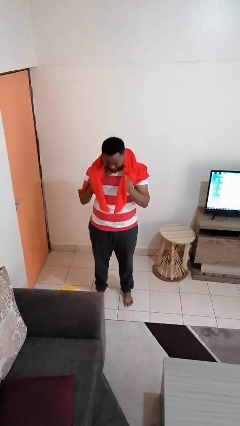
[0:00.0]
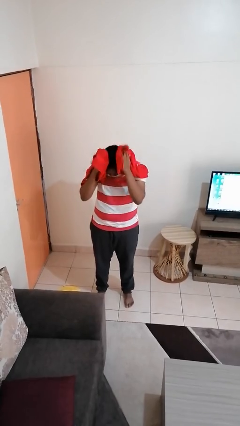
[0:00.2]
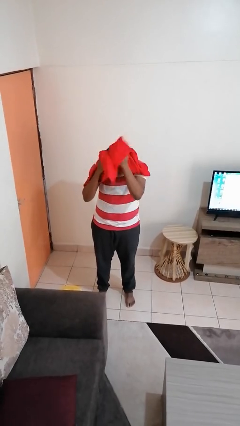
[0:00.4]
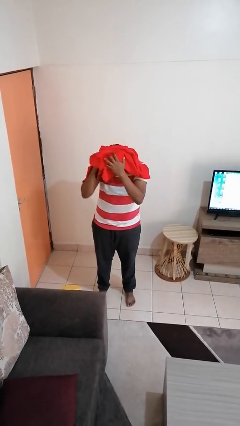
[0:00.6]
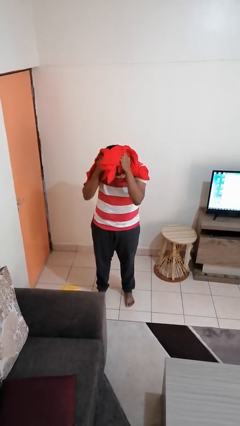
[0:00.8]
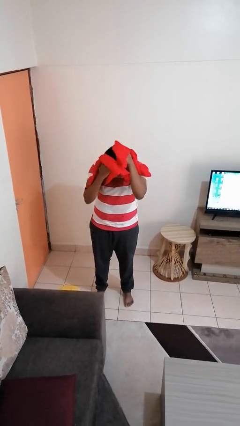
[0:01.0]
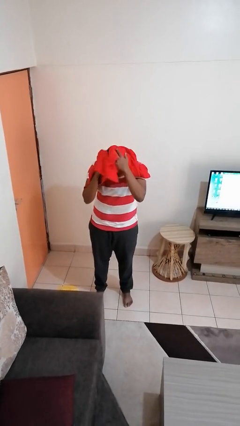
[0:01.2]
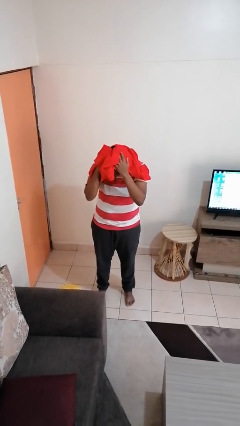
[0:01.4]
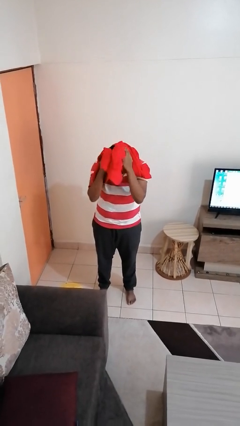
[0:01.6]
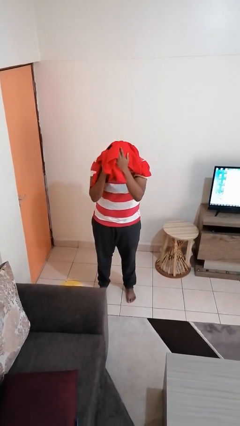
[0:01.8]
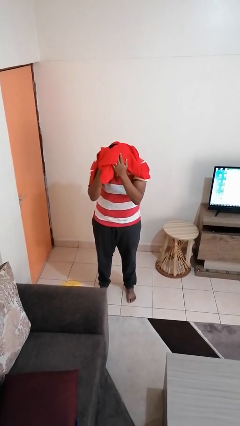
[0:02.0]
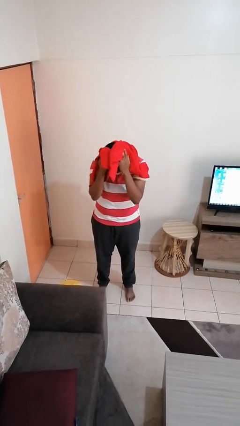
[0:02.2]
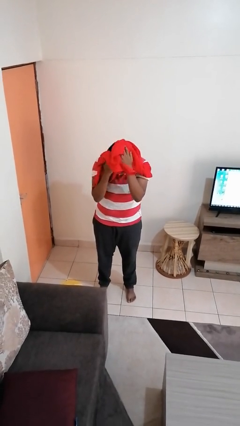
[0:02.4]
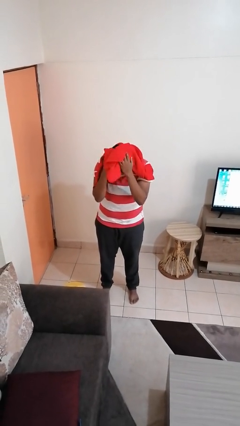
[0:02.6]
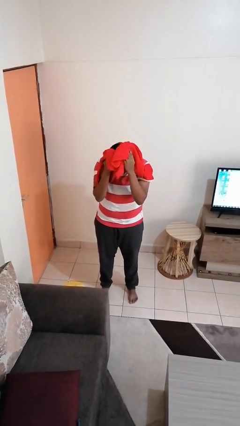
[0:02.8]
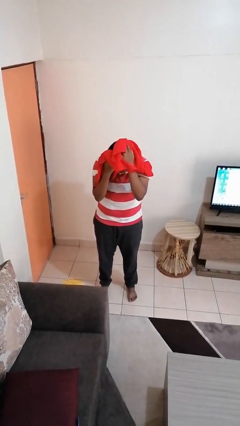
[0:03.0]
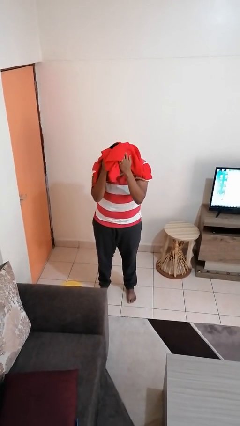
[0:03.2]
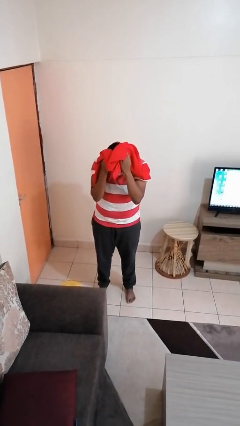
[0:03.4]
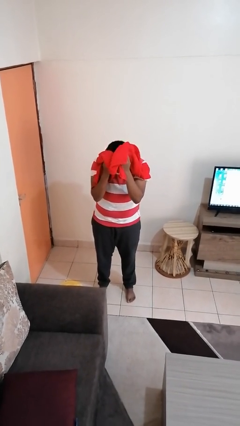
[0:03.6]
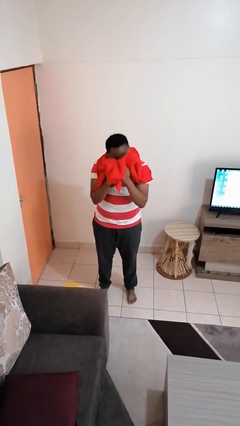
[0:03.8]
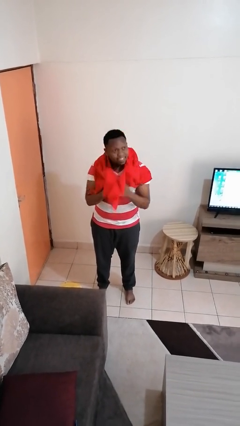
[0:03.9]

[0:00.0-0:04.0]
person dries hair with towel

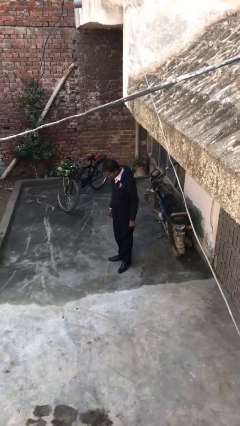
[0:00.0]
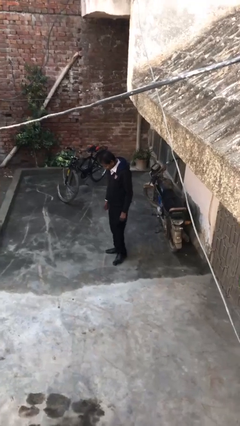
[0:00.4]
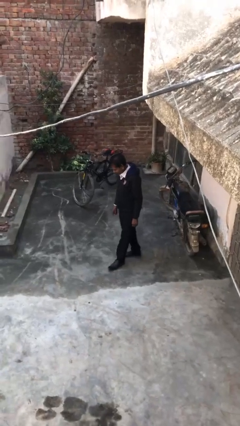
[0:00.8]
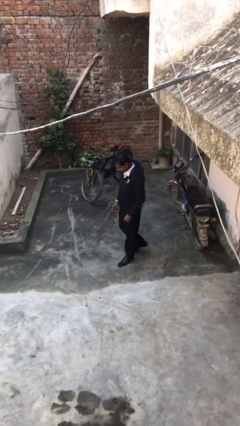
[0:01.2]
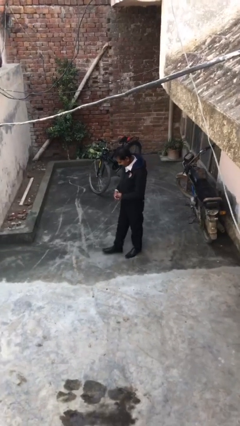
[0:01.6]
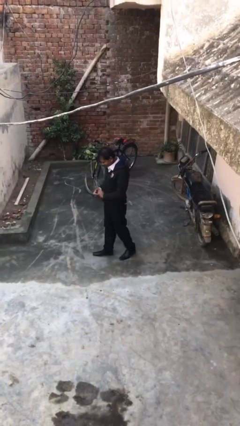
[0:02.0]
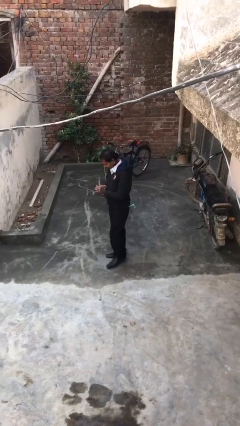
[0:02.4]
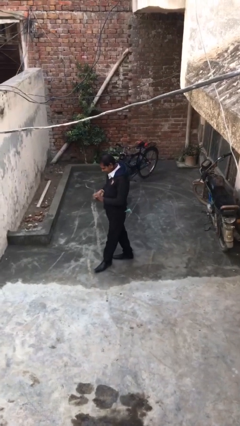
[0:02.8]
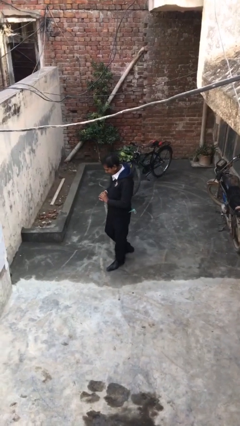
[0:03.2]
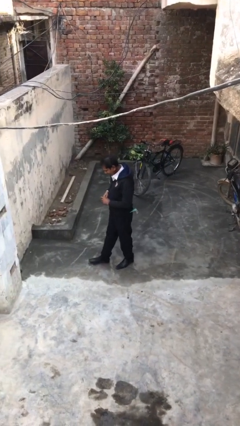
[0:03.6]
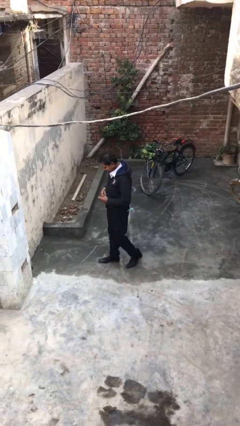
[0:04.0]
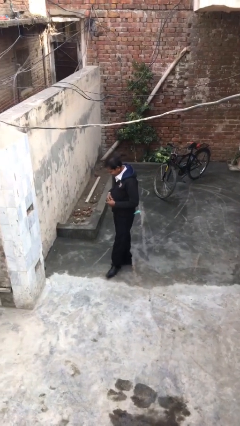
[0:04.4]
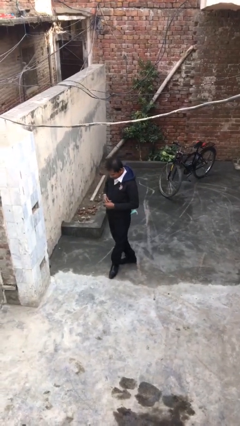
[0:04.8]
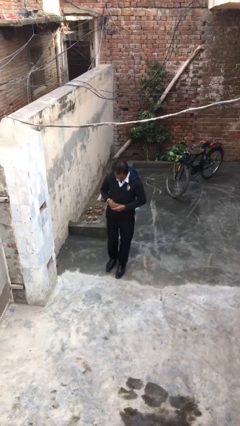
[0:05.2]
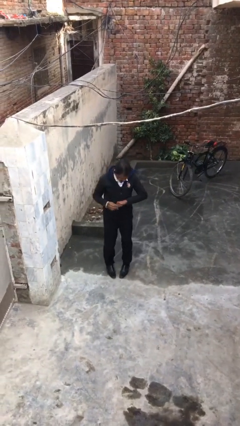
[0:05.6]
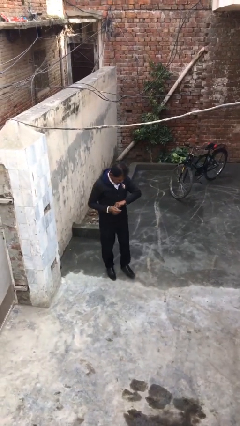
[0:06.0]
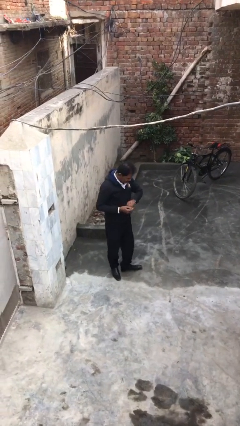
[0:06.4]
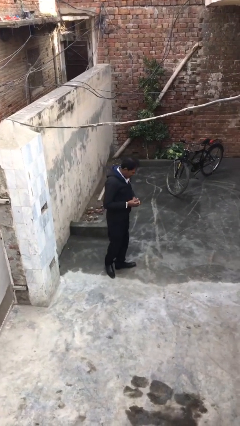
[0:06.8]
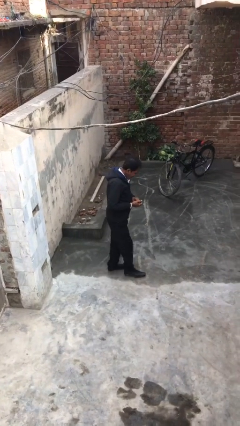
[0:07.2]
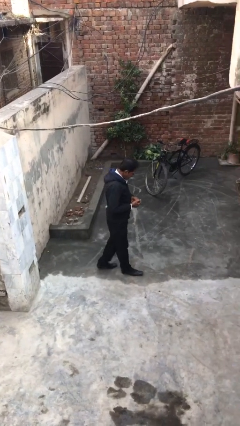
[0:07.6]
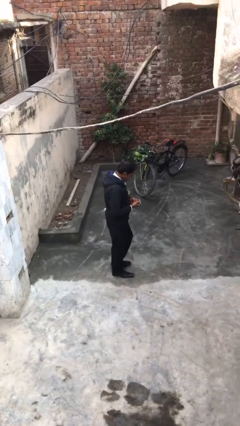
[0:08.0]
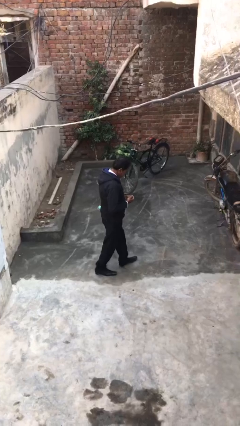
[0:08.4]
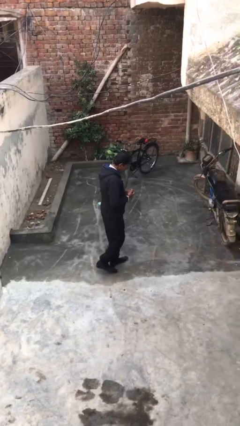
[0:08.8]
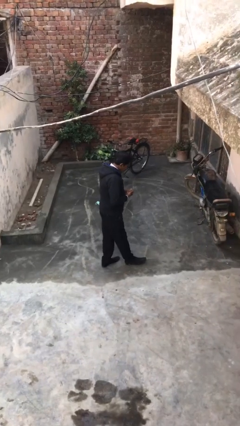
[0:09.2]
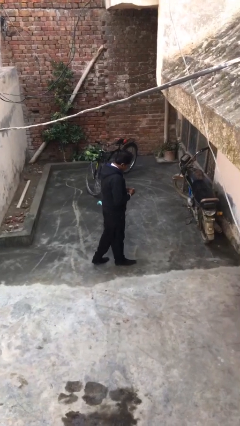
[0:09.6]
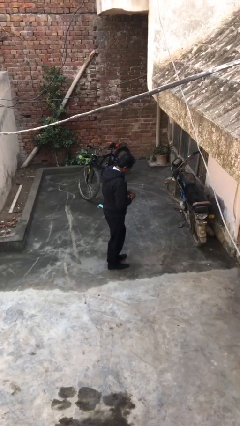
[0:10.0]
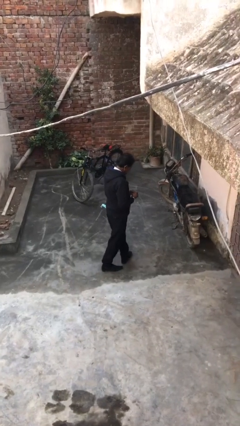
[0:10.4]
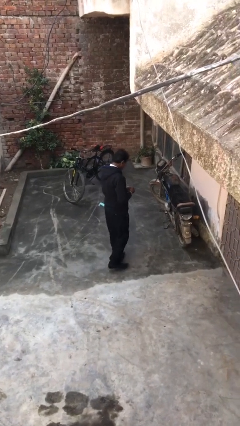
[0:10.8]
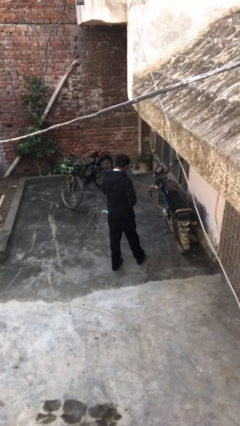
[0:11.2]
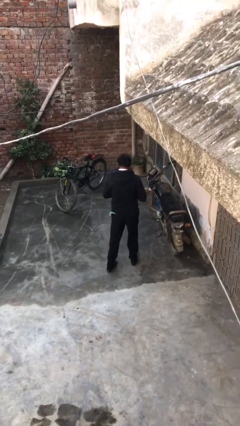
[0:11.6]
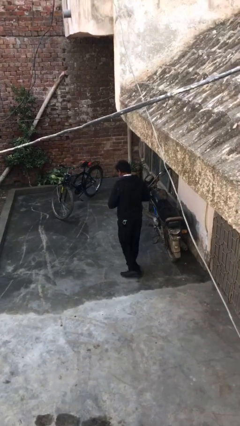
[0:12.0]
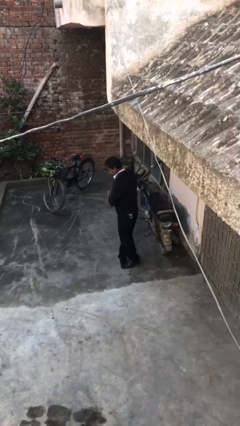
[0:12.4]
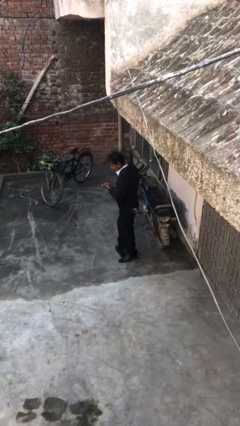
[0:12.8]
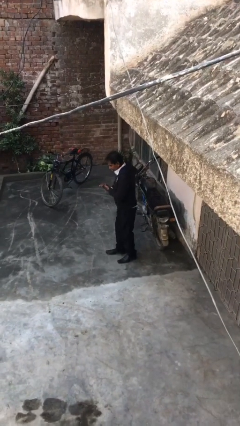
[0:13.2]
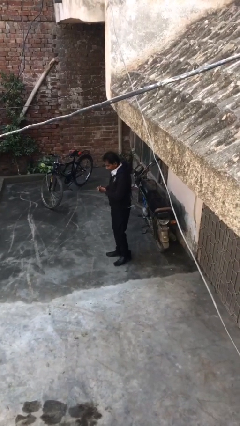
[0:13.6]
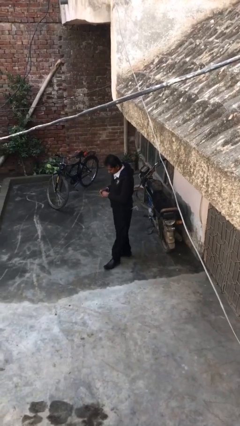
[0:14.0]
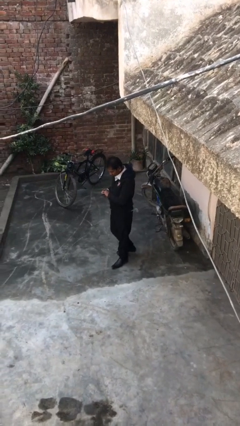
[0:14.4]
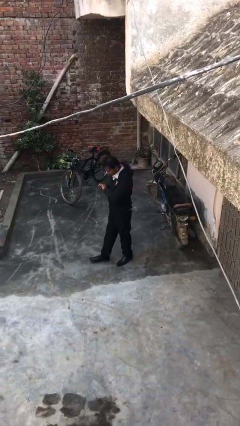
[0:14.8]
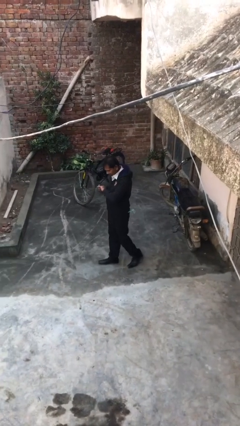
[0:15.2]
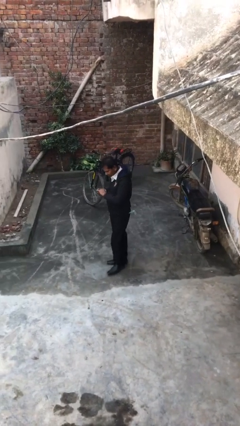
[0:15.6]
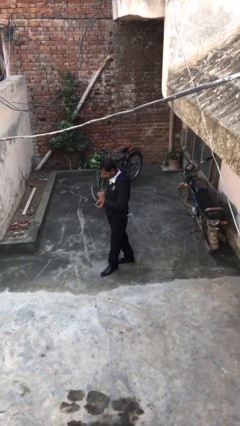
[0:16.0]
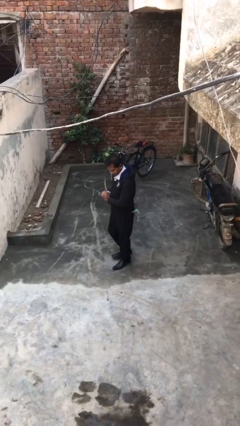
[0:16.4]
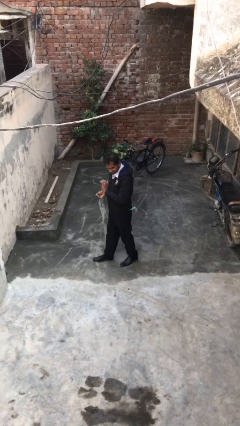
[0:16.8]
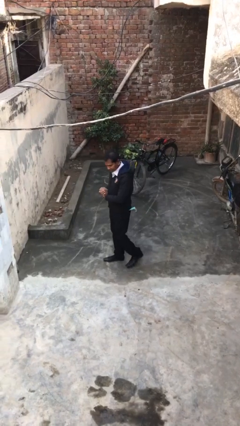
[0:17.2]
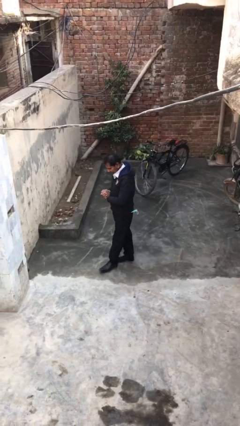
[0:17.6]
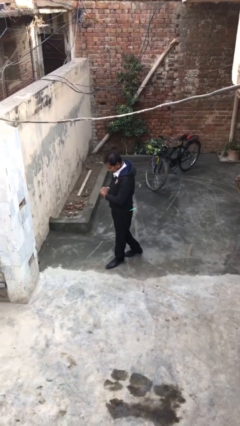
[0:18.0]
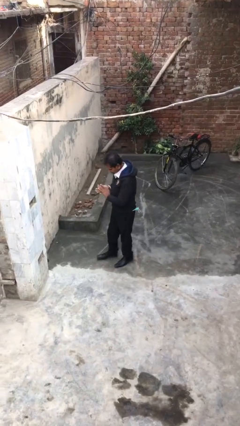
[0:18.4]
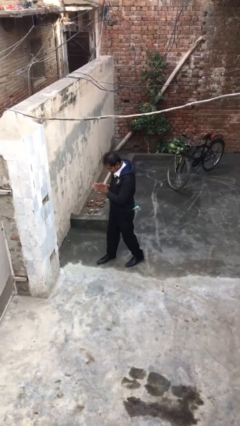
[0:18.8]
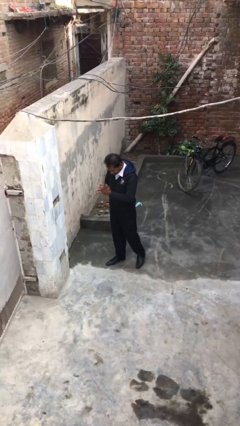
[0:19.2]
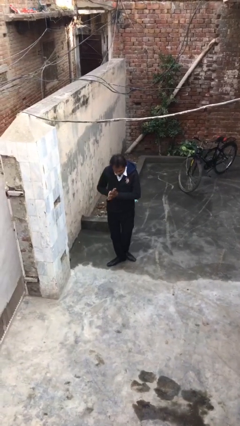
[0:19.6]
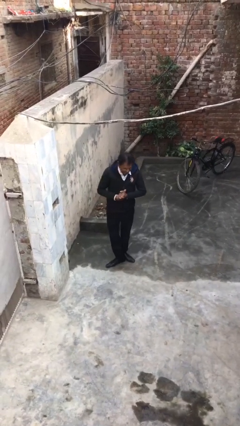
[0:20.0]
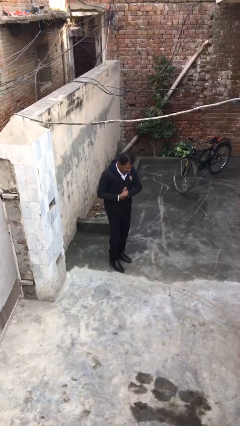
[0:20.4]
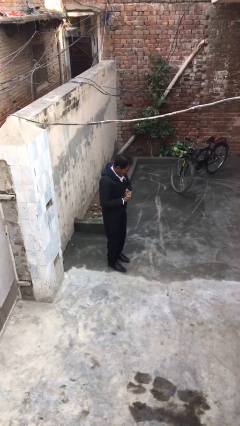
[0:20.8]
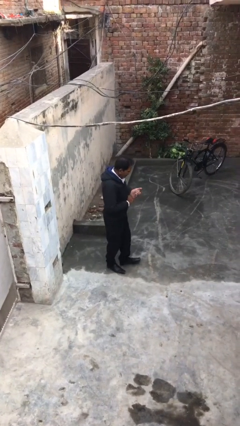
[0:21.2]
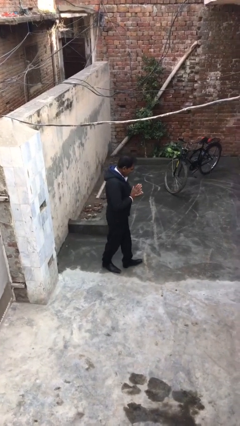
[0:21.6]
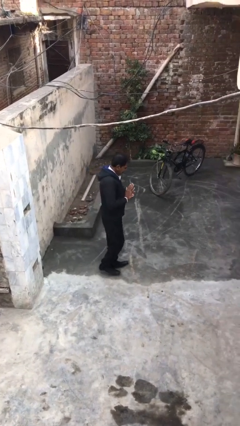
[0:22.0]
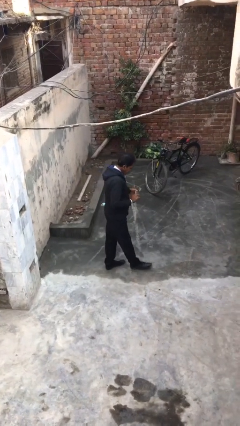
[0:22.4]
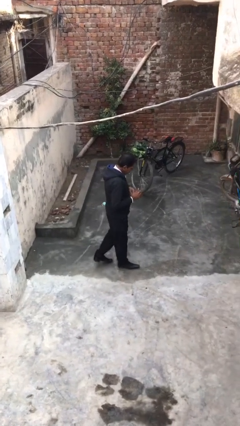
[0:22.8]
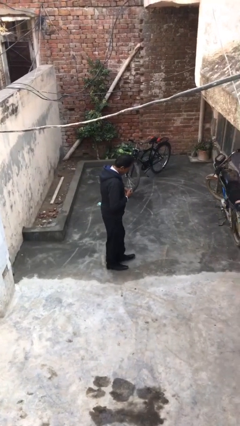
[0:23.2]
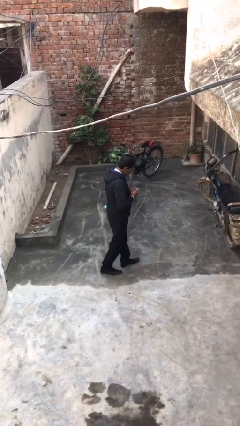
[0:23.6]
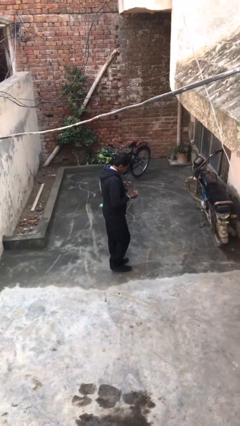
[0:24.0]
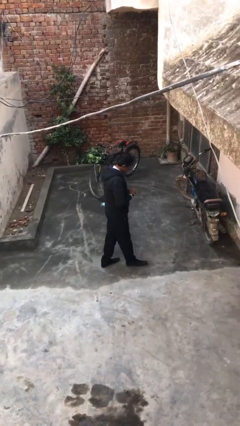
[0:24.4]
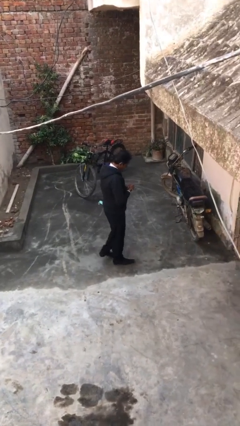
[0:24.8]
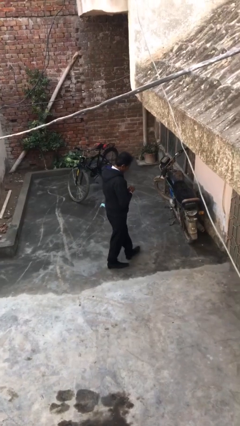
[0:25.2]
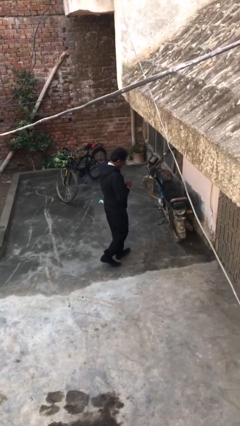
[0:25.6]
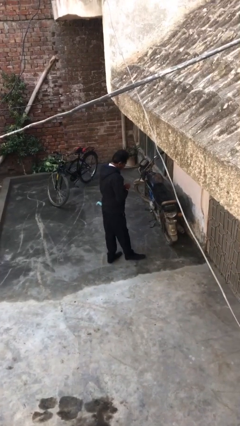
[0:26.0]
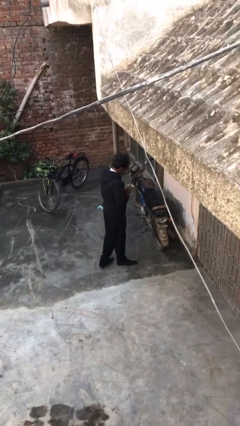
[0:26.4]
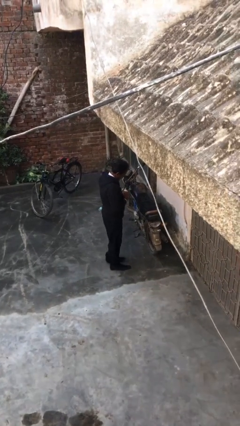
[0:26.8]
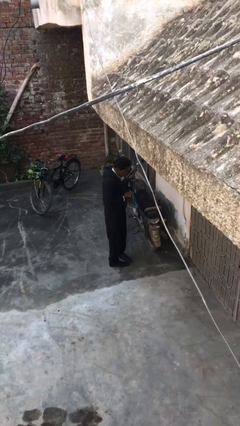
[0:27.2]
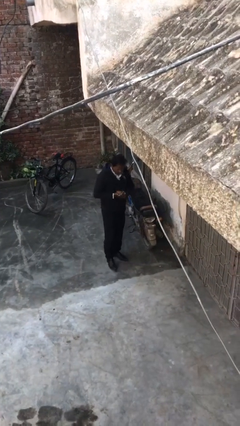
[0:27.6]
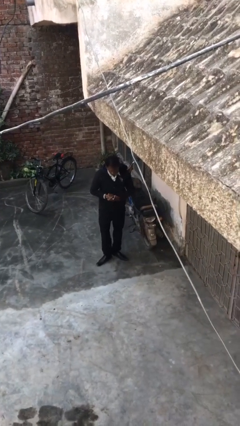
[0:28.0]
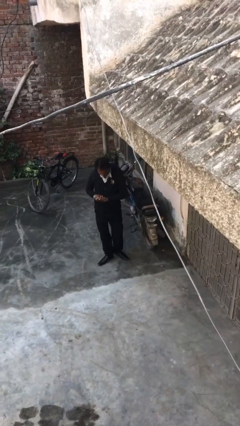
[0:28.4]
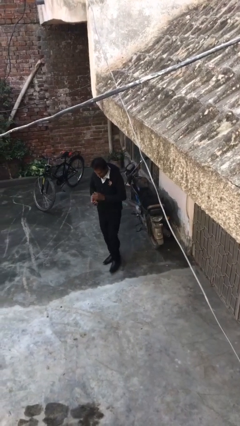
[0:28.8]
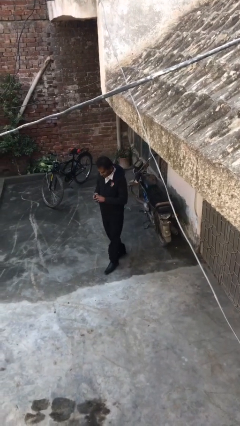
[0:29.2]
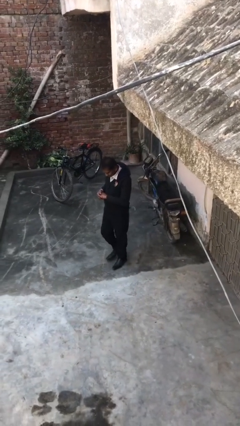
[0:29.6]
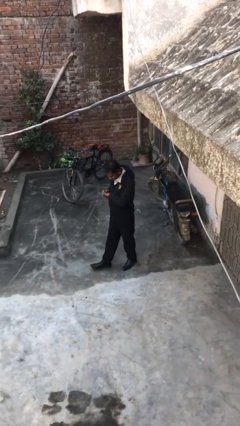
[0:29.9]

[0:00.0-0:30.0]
person walks
